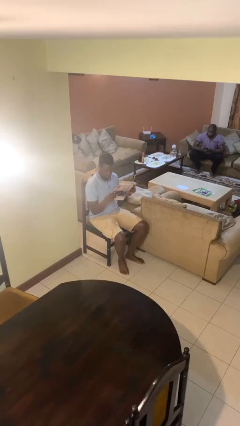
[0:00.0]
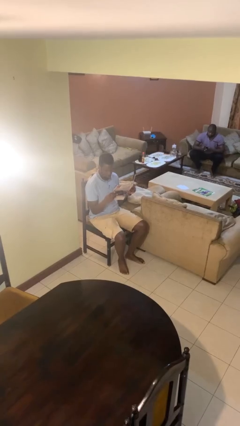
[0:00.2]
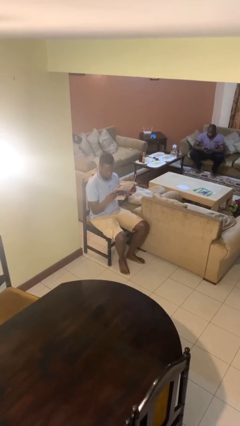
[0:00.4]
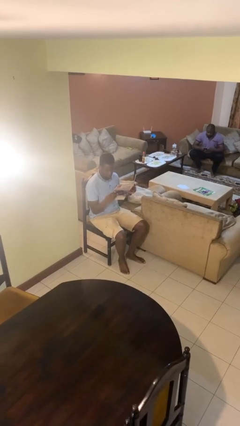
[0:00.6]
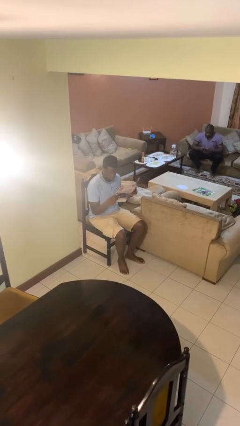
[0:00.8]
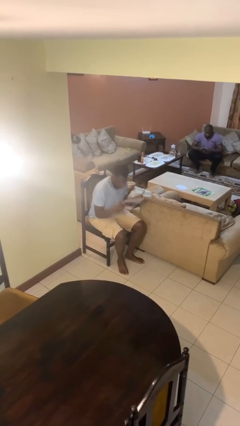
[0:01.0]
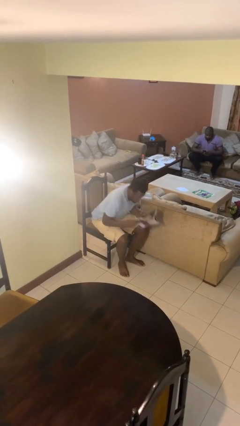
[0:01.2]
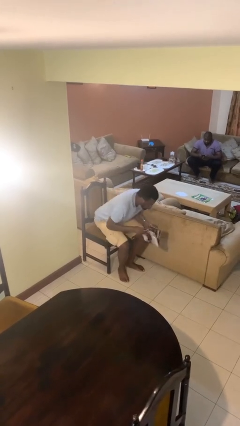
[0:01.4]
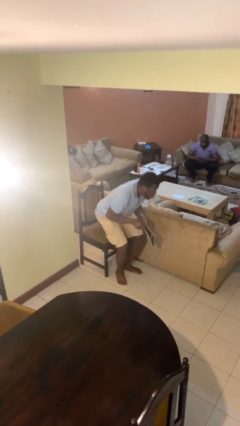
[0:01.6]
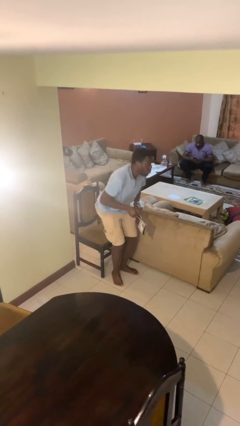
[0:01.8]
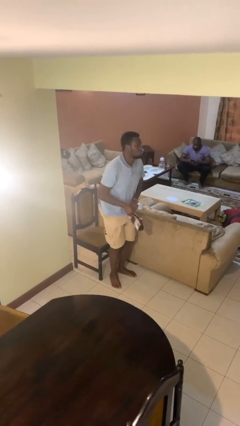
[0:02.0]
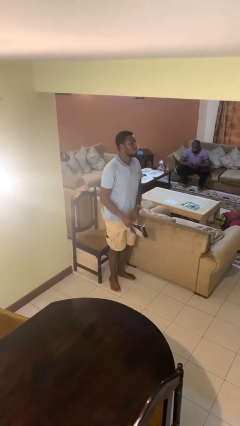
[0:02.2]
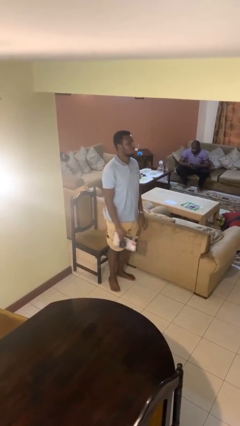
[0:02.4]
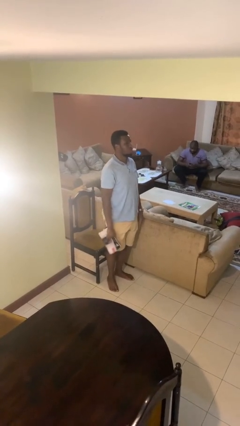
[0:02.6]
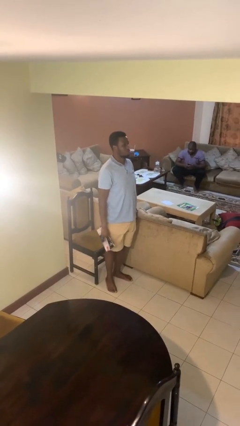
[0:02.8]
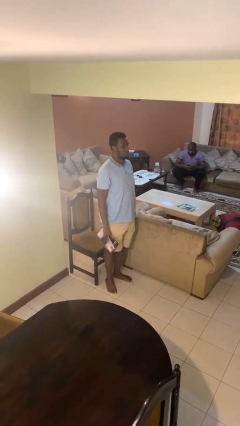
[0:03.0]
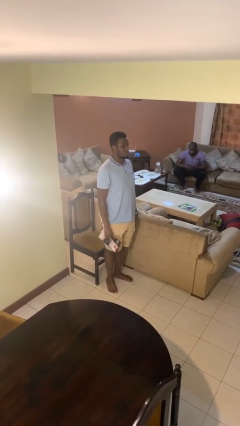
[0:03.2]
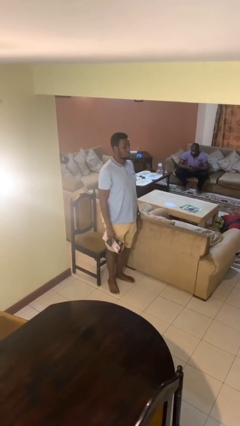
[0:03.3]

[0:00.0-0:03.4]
person stands up

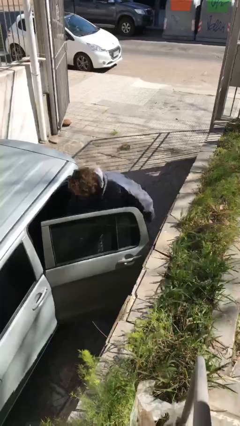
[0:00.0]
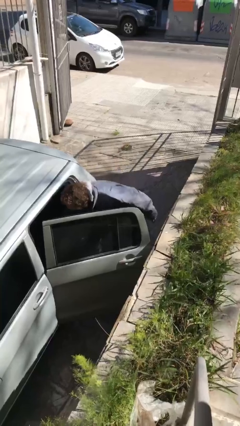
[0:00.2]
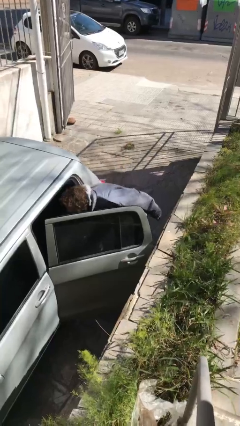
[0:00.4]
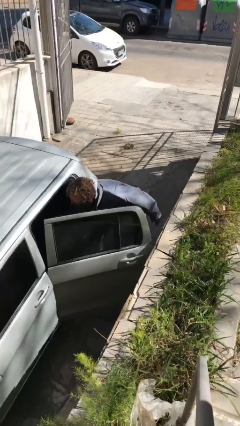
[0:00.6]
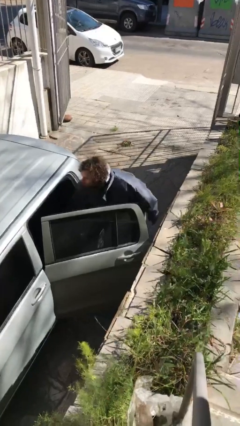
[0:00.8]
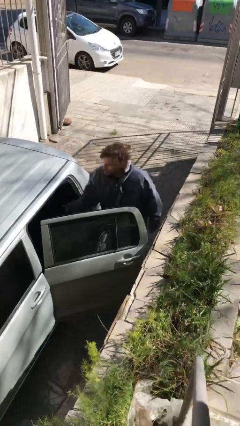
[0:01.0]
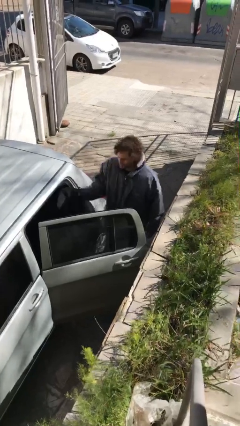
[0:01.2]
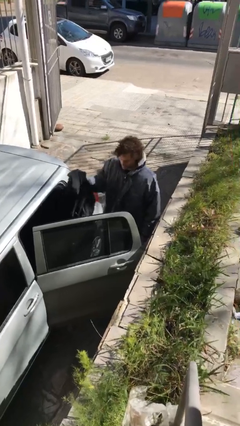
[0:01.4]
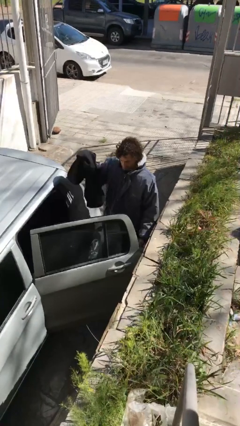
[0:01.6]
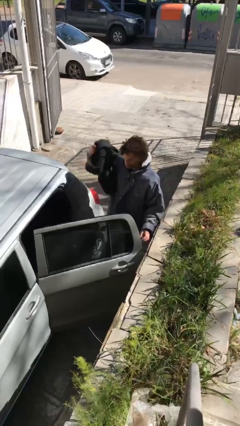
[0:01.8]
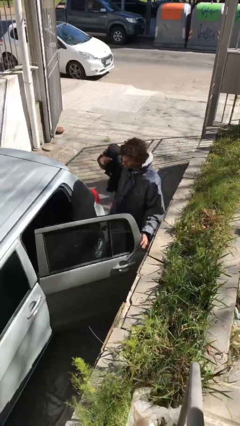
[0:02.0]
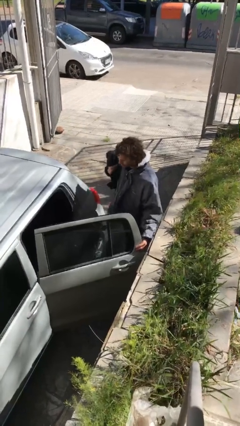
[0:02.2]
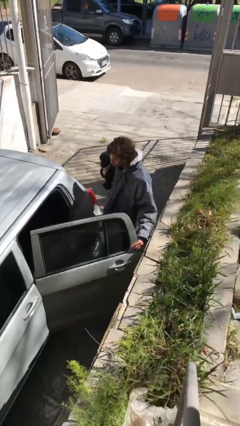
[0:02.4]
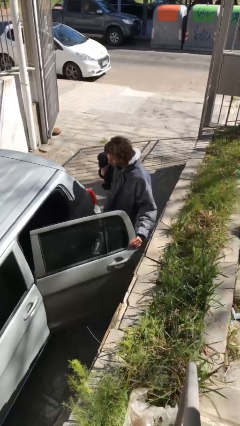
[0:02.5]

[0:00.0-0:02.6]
person unloads car

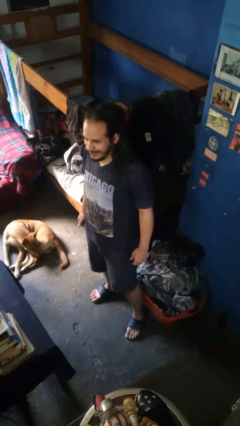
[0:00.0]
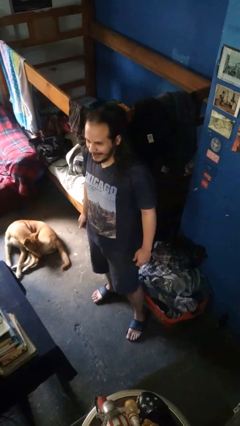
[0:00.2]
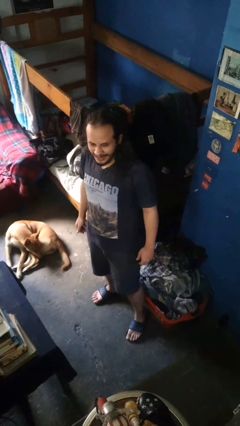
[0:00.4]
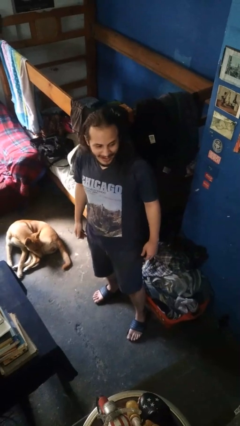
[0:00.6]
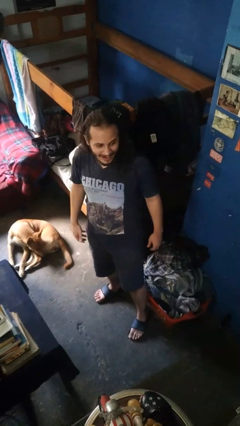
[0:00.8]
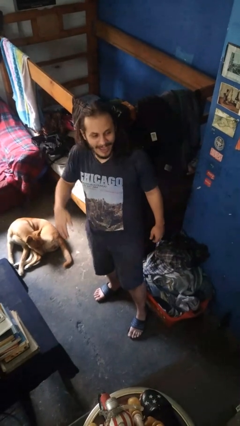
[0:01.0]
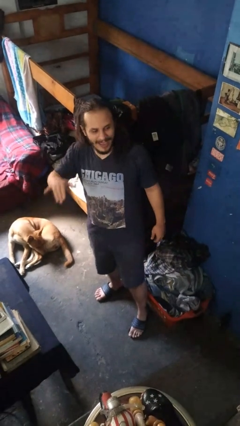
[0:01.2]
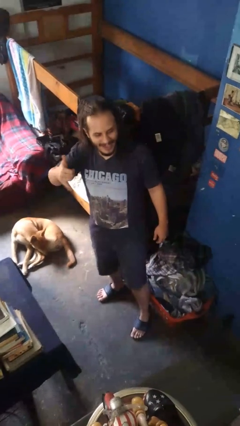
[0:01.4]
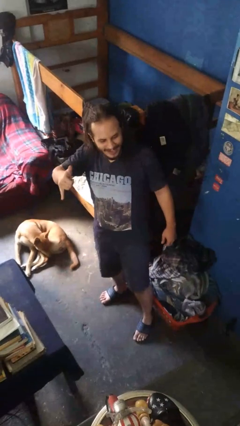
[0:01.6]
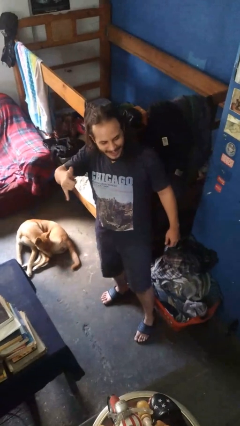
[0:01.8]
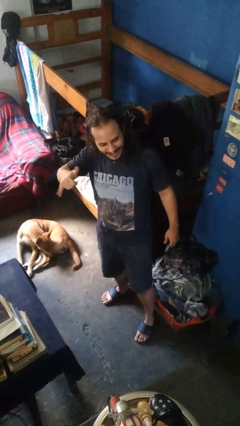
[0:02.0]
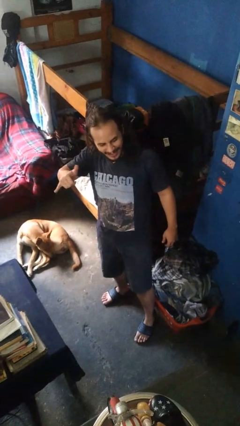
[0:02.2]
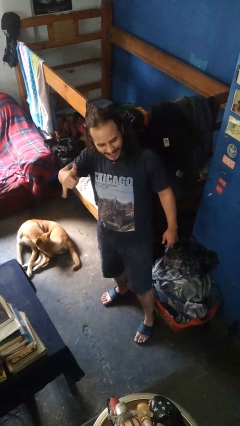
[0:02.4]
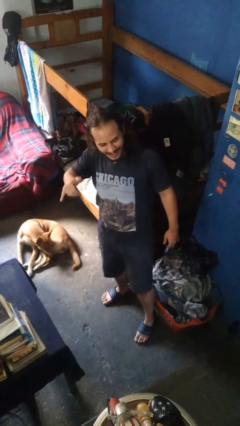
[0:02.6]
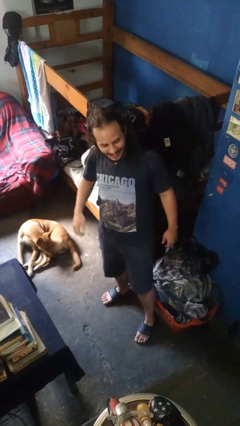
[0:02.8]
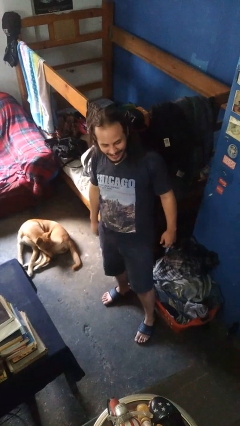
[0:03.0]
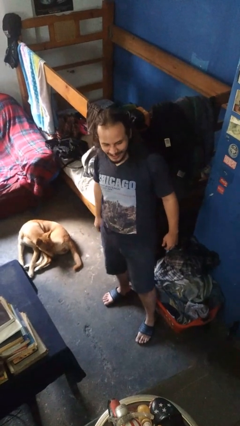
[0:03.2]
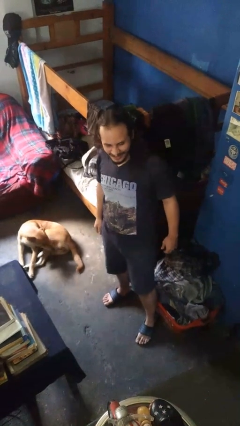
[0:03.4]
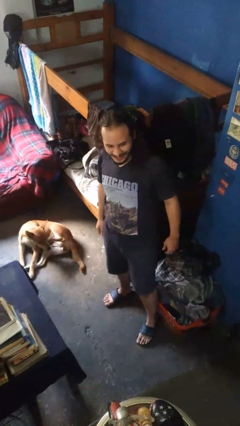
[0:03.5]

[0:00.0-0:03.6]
person gestures hang loose

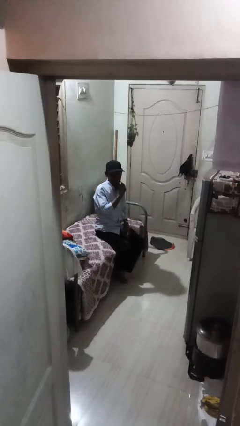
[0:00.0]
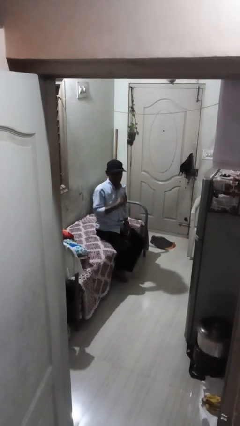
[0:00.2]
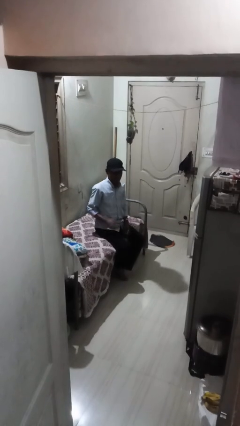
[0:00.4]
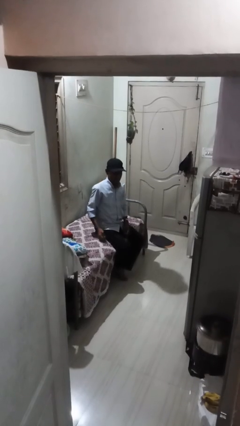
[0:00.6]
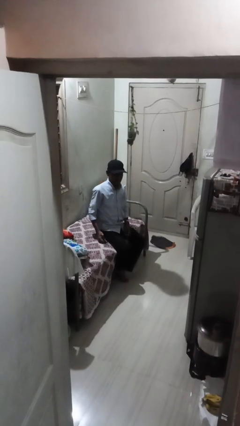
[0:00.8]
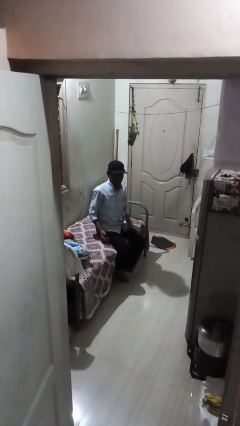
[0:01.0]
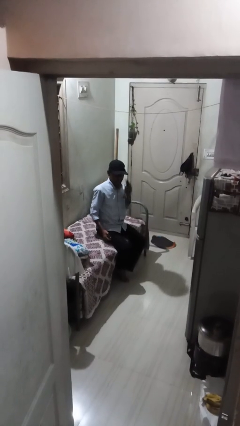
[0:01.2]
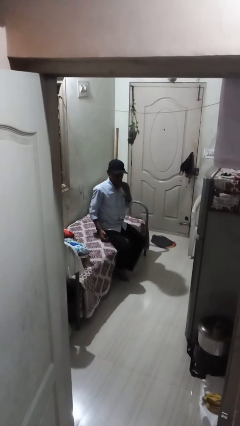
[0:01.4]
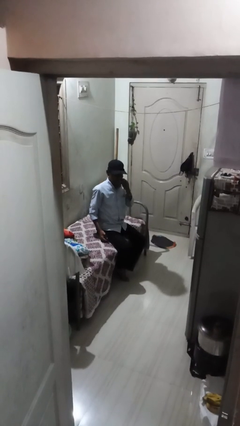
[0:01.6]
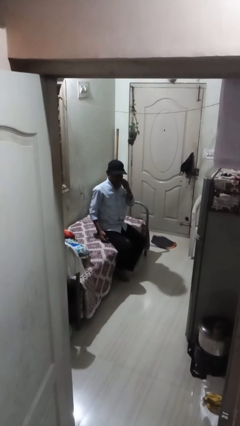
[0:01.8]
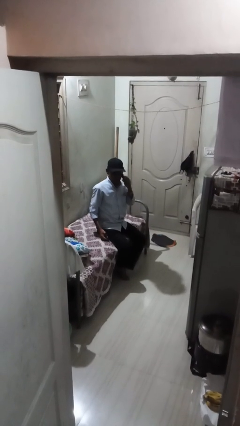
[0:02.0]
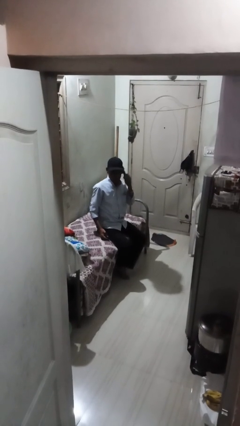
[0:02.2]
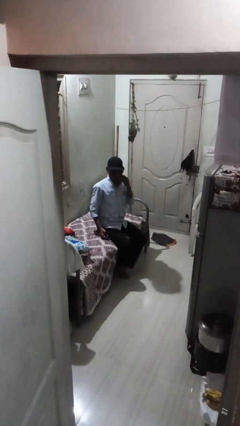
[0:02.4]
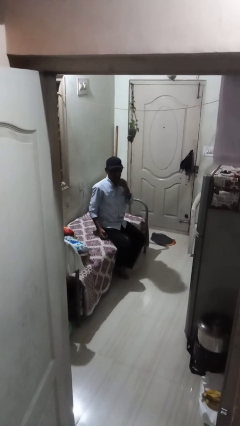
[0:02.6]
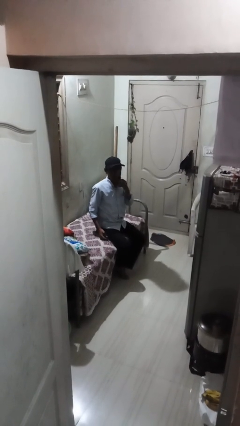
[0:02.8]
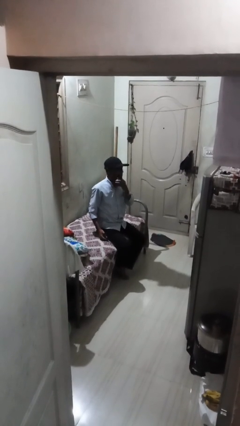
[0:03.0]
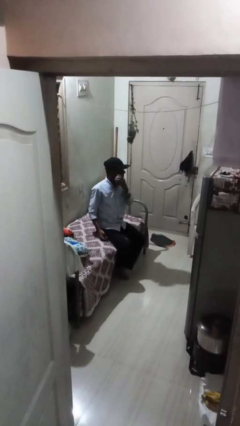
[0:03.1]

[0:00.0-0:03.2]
person applies shaving cream

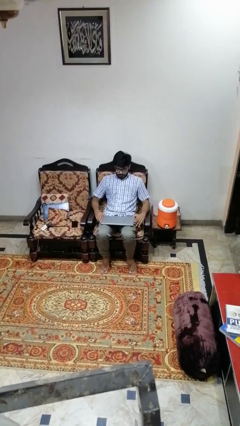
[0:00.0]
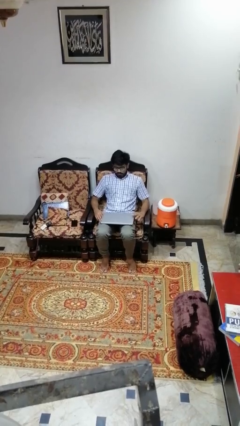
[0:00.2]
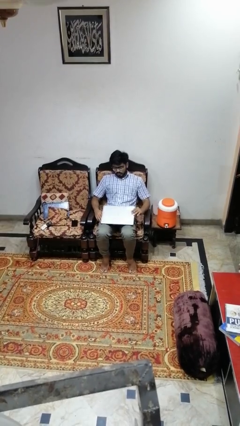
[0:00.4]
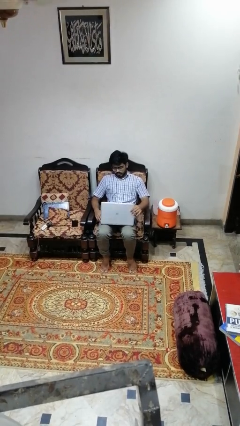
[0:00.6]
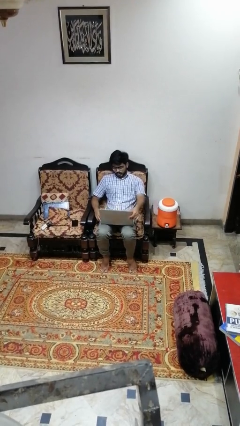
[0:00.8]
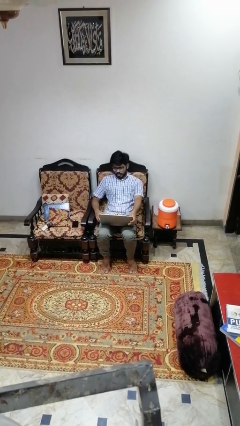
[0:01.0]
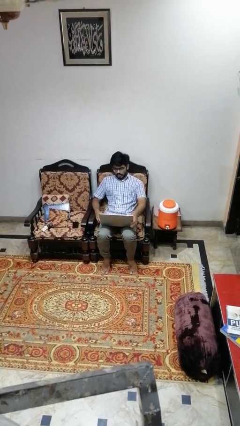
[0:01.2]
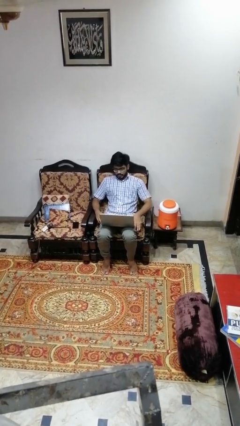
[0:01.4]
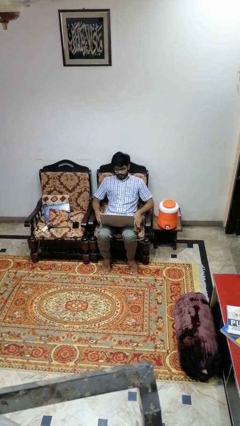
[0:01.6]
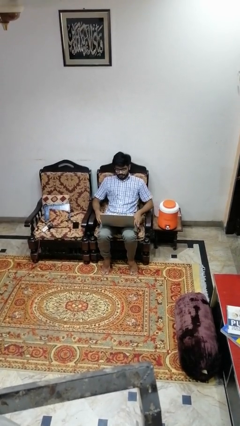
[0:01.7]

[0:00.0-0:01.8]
person opens laptop

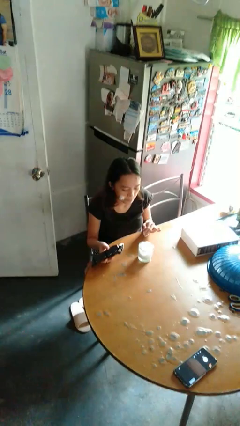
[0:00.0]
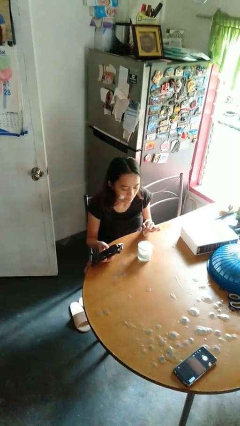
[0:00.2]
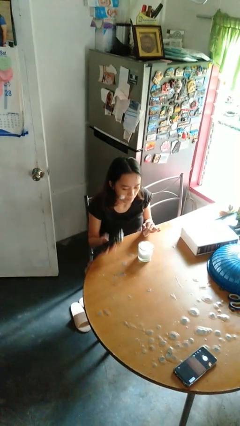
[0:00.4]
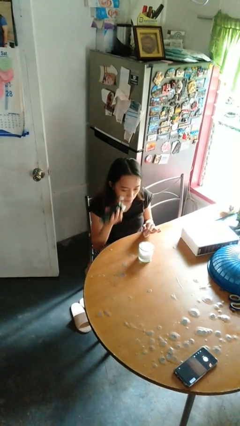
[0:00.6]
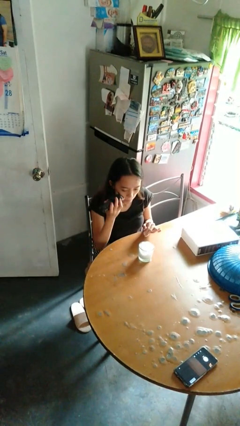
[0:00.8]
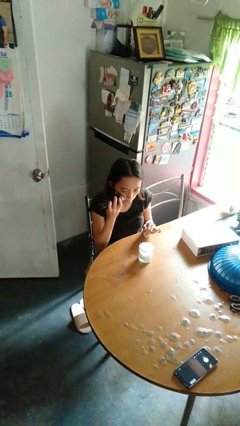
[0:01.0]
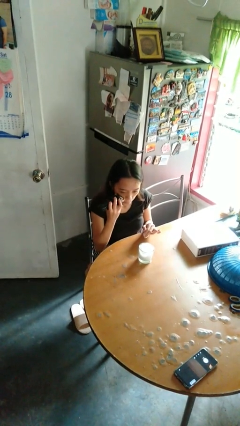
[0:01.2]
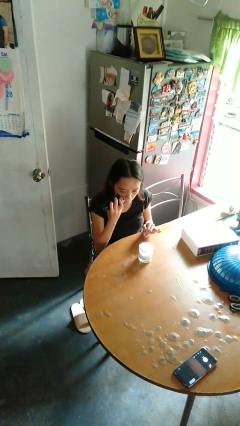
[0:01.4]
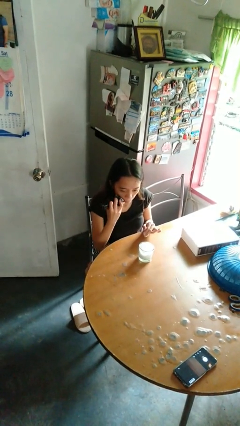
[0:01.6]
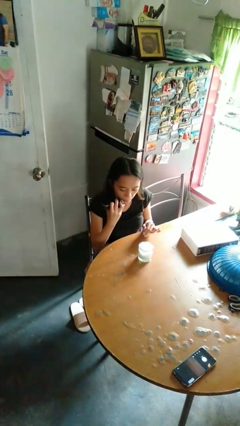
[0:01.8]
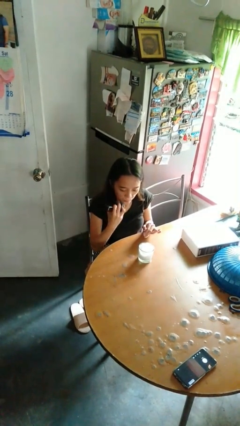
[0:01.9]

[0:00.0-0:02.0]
person shaves face

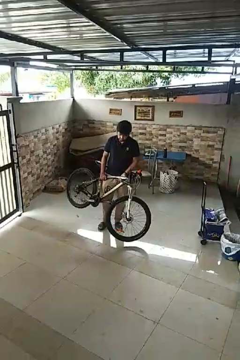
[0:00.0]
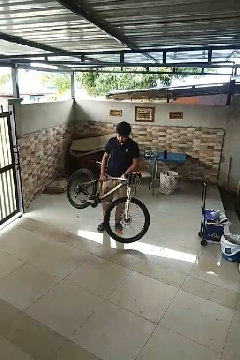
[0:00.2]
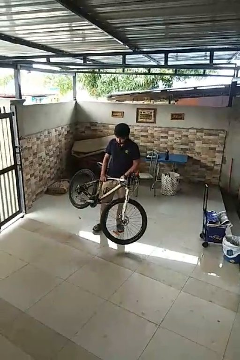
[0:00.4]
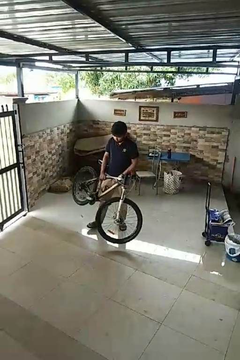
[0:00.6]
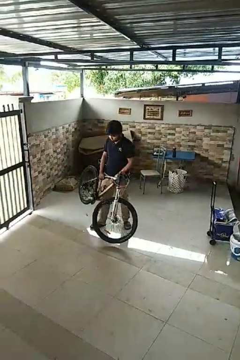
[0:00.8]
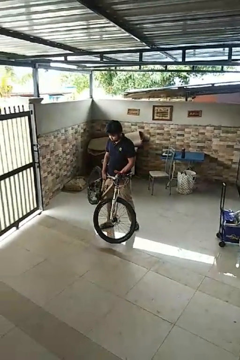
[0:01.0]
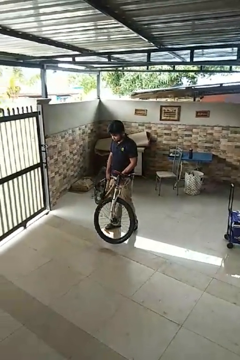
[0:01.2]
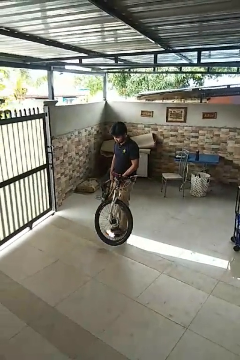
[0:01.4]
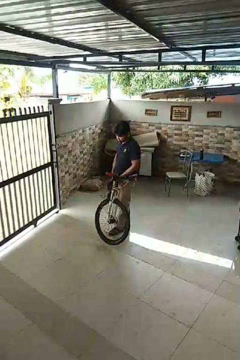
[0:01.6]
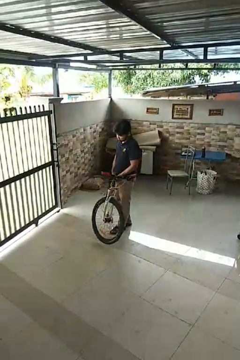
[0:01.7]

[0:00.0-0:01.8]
person carries bicycle
